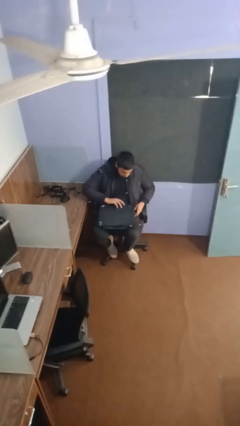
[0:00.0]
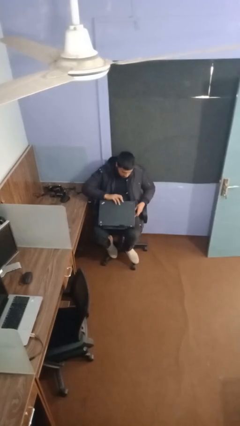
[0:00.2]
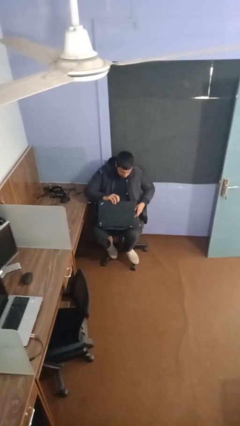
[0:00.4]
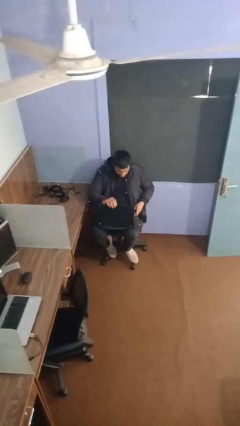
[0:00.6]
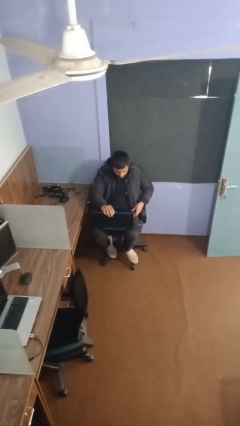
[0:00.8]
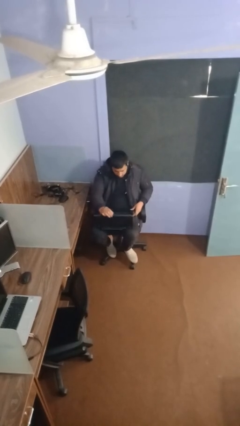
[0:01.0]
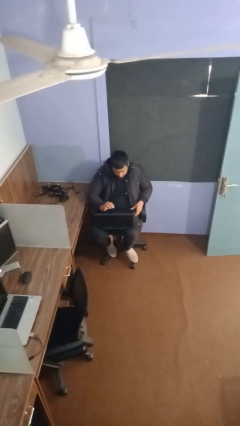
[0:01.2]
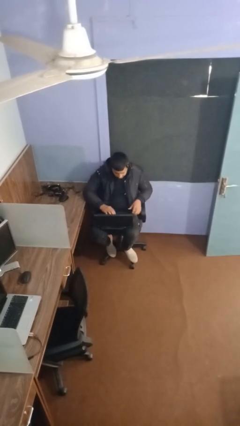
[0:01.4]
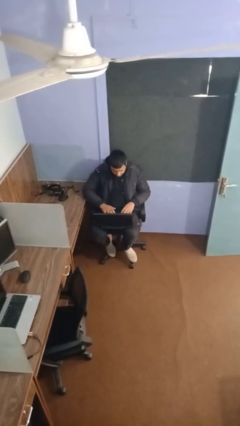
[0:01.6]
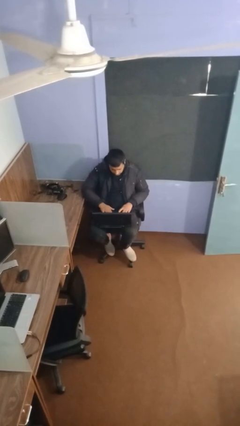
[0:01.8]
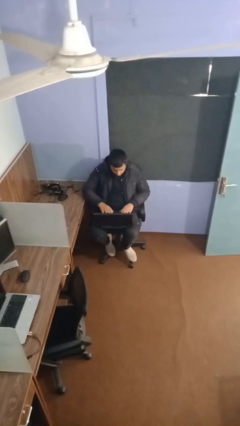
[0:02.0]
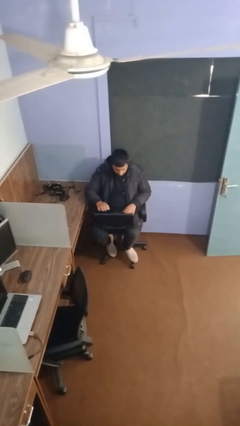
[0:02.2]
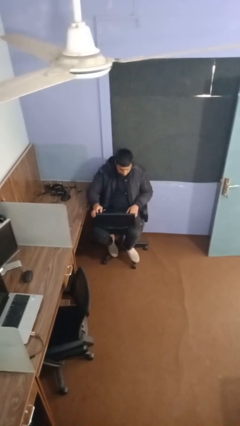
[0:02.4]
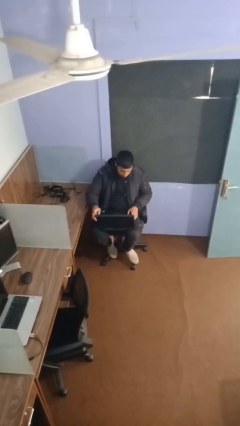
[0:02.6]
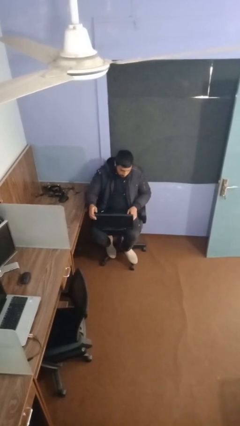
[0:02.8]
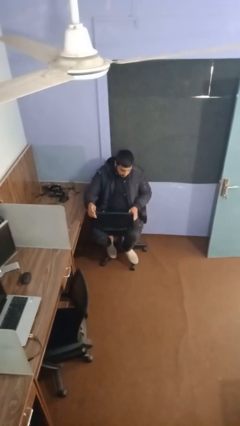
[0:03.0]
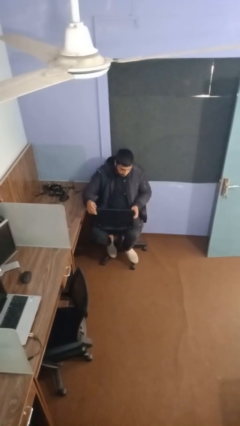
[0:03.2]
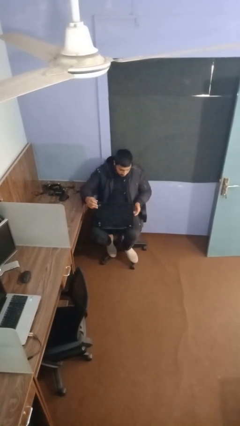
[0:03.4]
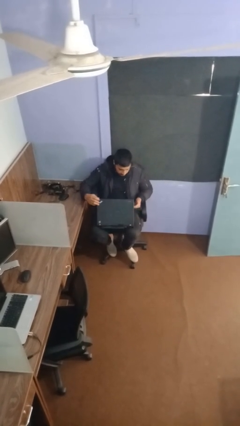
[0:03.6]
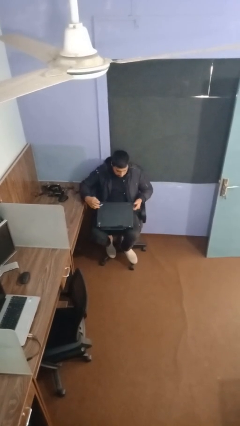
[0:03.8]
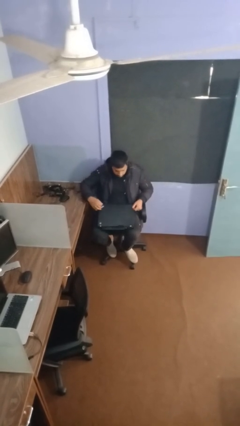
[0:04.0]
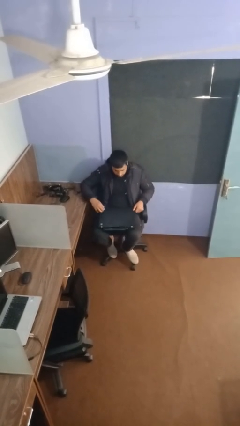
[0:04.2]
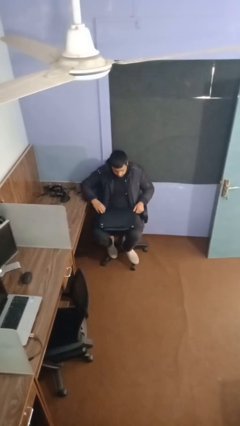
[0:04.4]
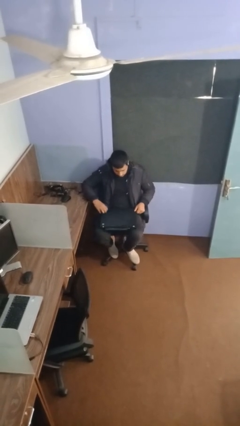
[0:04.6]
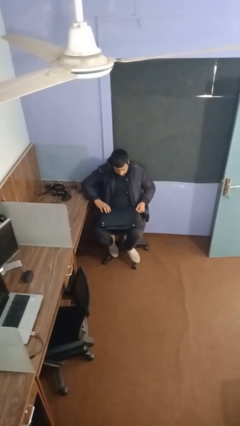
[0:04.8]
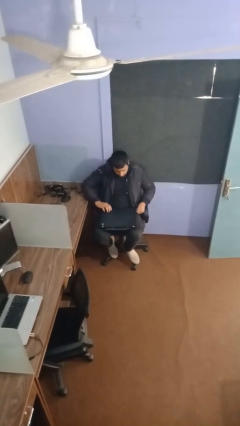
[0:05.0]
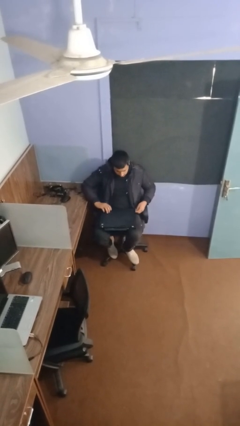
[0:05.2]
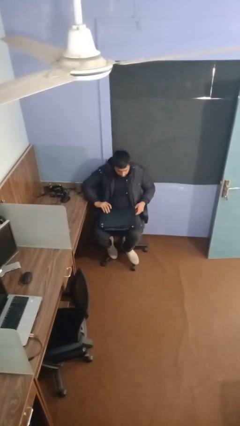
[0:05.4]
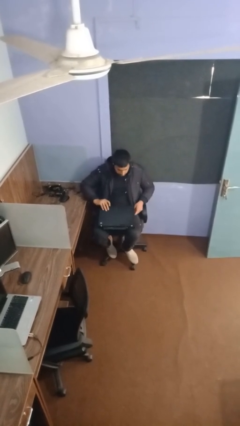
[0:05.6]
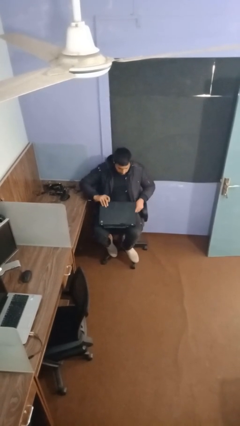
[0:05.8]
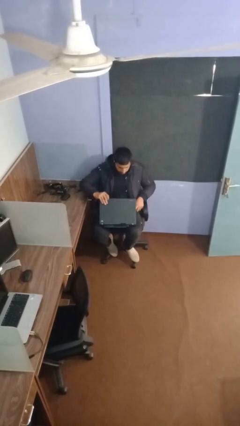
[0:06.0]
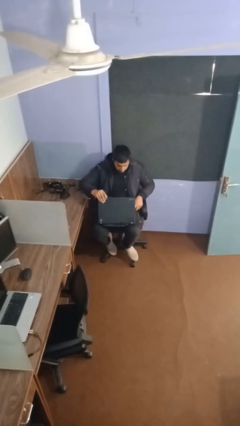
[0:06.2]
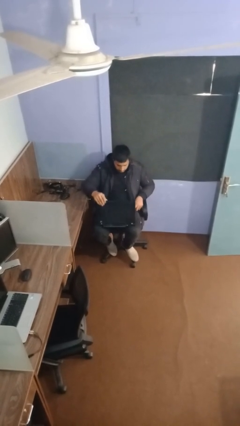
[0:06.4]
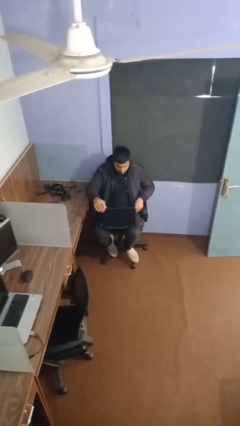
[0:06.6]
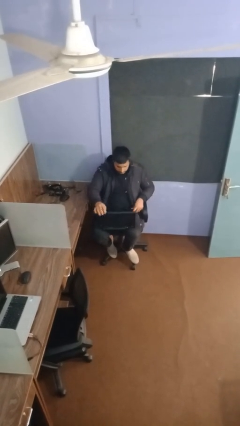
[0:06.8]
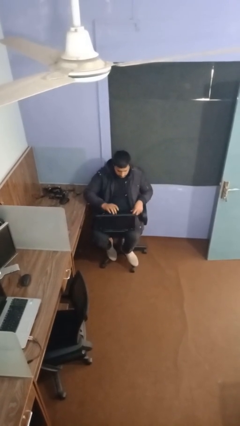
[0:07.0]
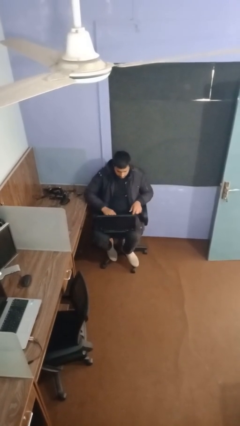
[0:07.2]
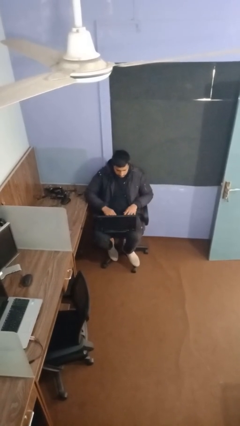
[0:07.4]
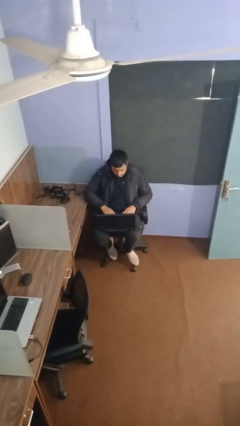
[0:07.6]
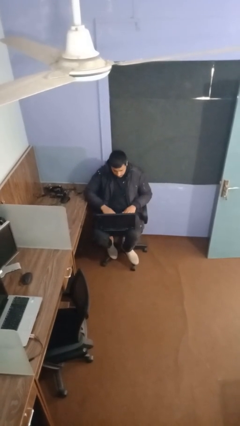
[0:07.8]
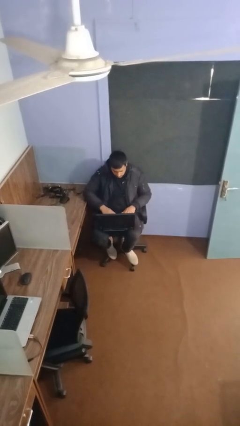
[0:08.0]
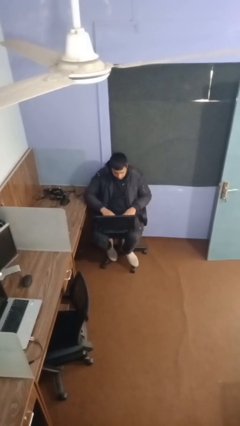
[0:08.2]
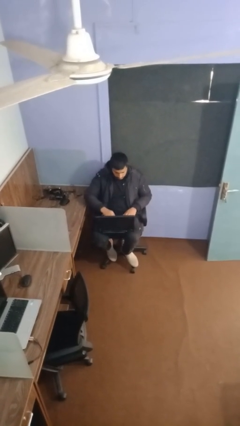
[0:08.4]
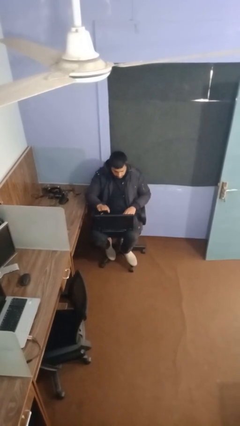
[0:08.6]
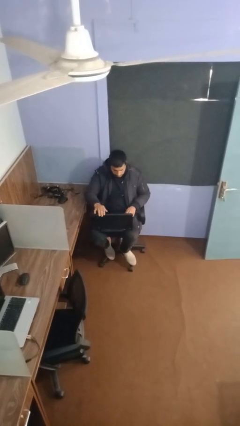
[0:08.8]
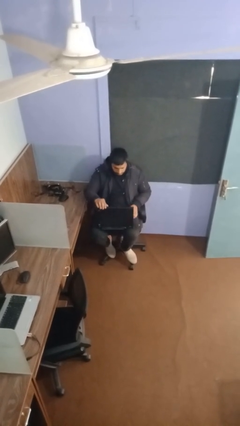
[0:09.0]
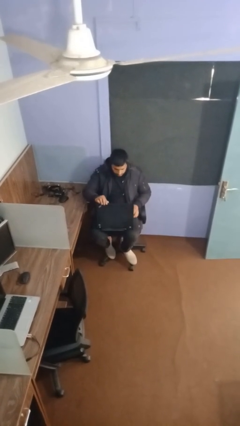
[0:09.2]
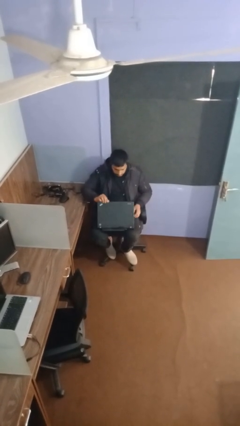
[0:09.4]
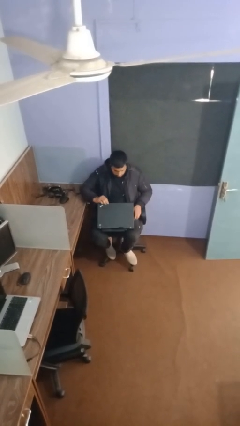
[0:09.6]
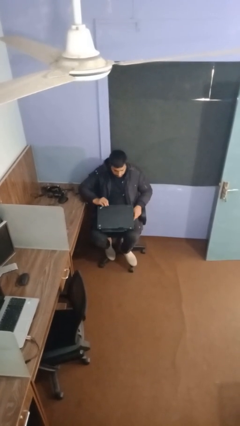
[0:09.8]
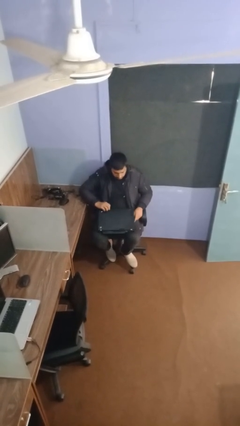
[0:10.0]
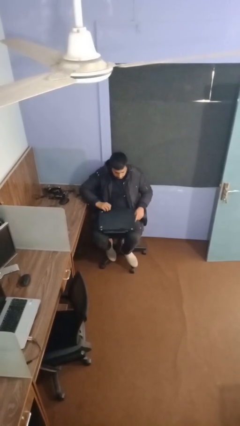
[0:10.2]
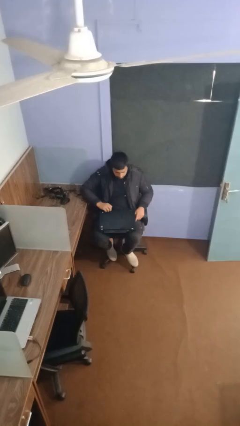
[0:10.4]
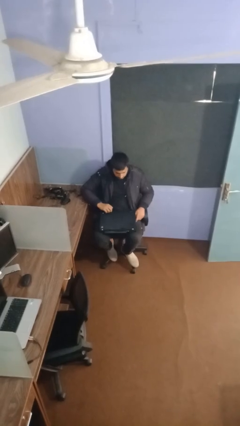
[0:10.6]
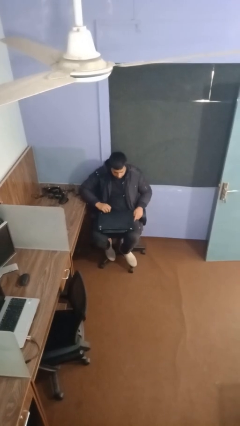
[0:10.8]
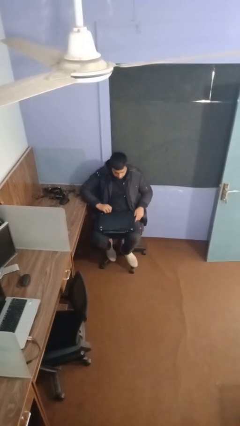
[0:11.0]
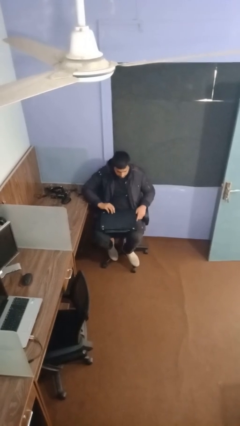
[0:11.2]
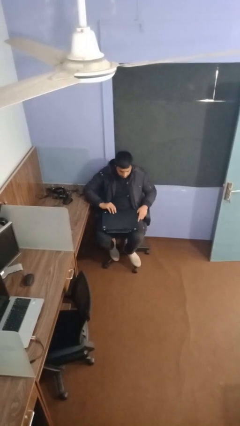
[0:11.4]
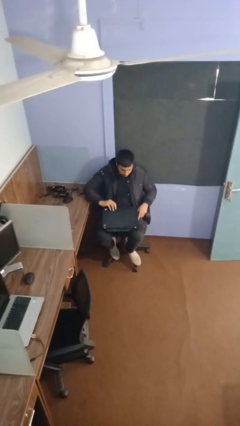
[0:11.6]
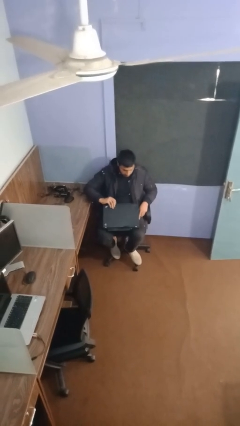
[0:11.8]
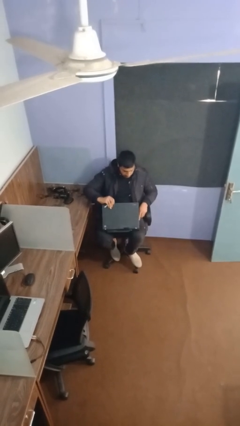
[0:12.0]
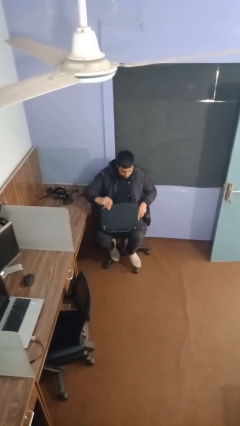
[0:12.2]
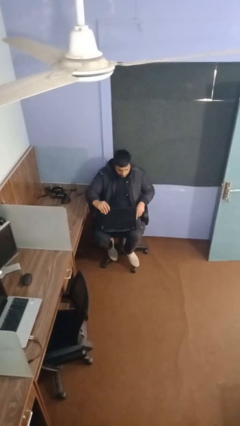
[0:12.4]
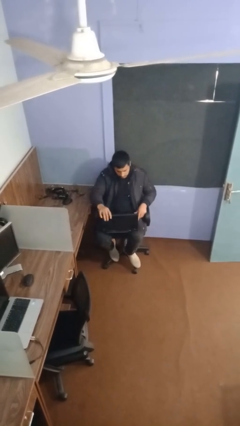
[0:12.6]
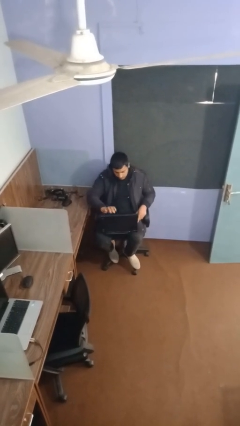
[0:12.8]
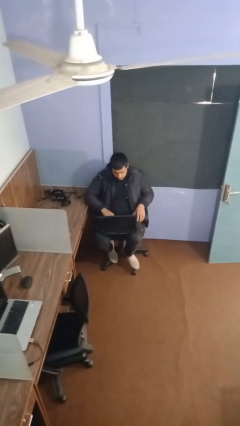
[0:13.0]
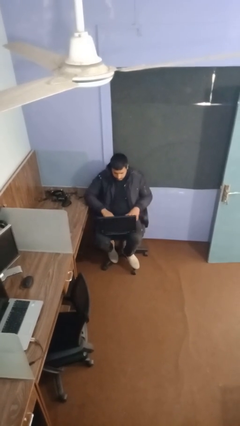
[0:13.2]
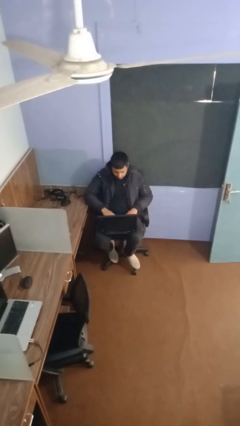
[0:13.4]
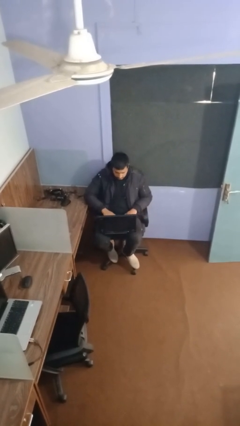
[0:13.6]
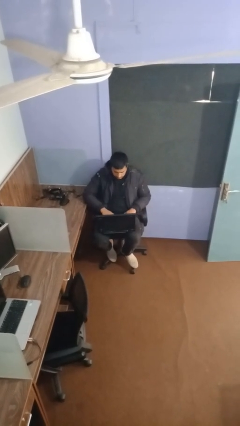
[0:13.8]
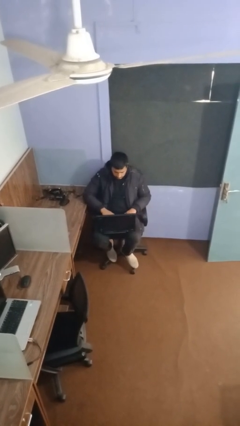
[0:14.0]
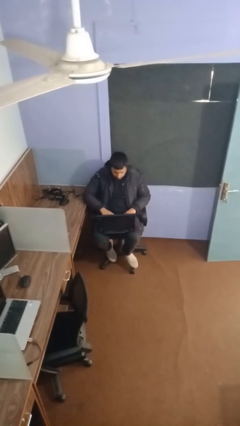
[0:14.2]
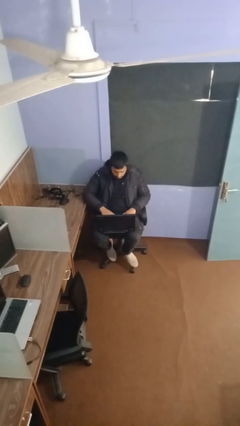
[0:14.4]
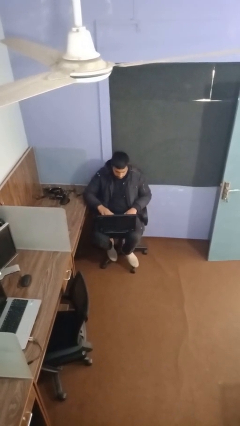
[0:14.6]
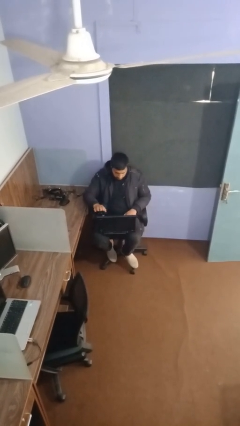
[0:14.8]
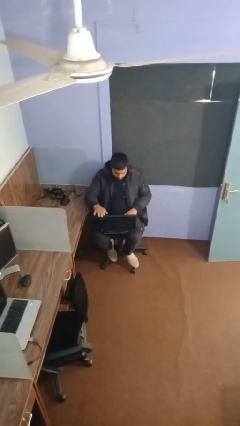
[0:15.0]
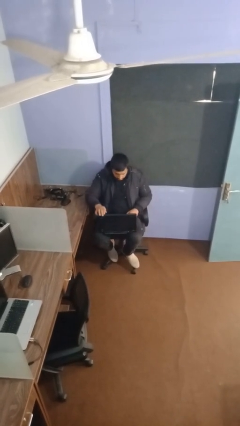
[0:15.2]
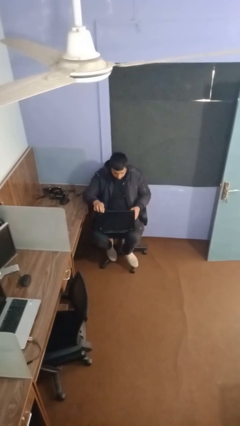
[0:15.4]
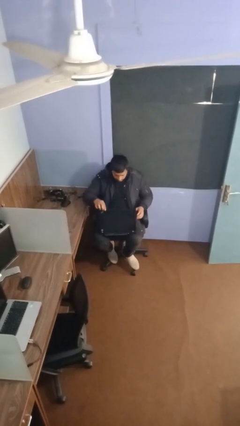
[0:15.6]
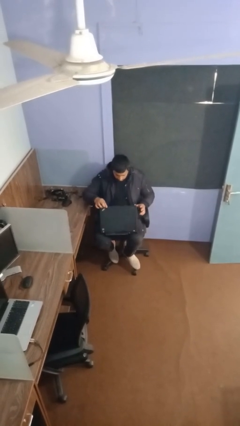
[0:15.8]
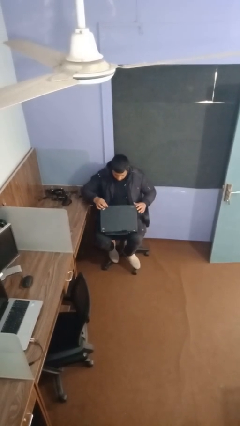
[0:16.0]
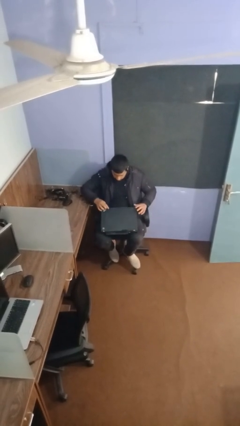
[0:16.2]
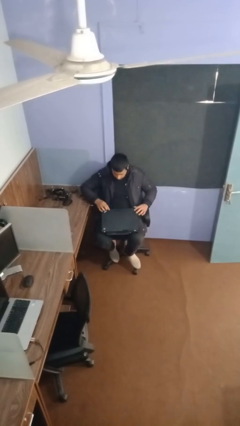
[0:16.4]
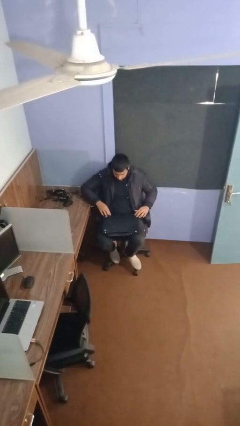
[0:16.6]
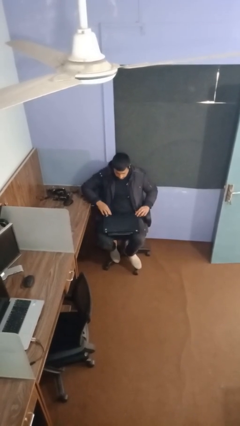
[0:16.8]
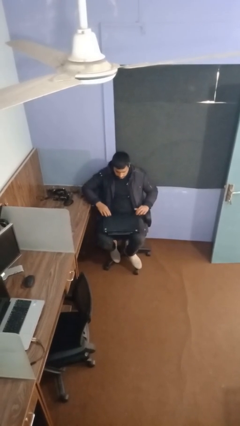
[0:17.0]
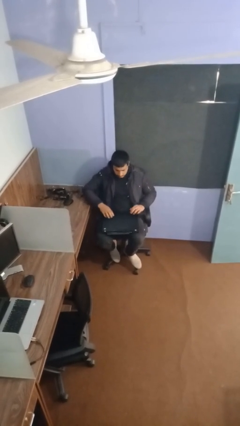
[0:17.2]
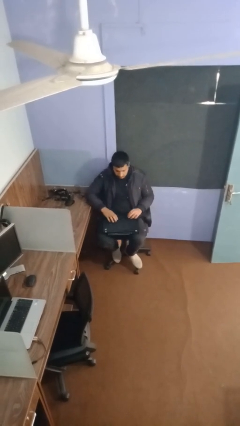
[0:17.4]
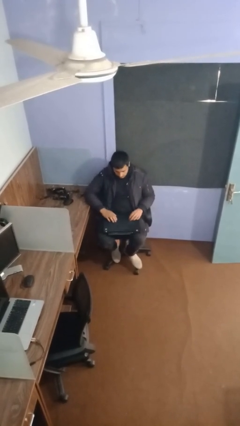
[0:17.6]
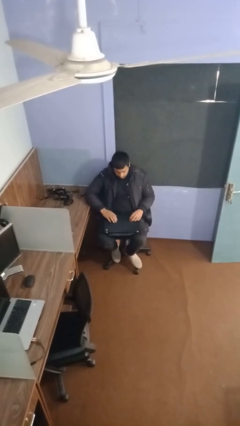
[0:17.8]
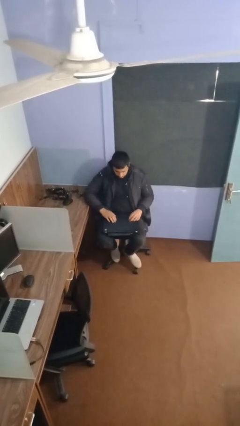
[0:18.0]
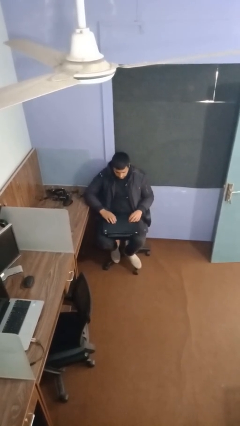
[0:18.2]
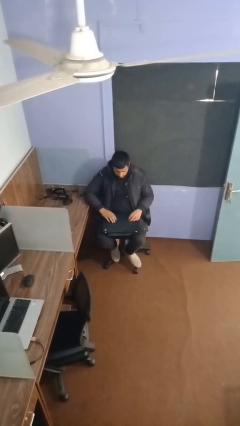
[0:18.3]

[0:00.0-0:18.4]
person interacts with laptop
